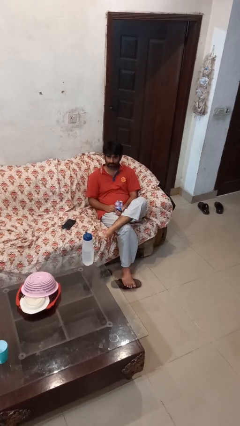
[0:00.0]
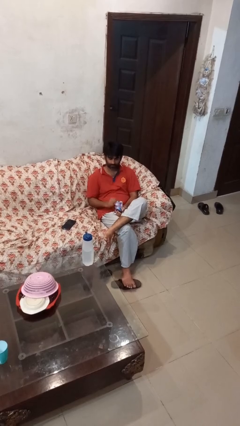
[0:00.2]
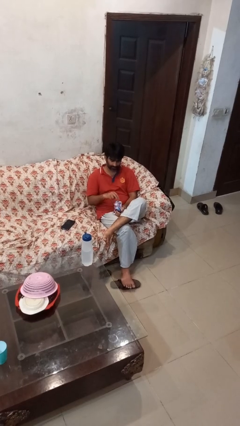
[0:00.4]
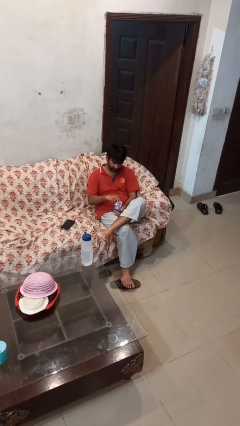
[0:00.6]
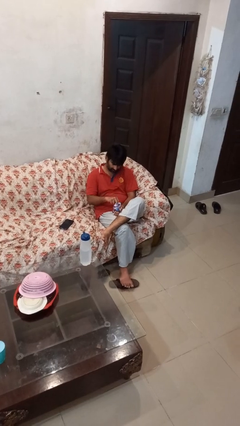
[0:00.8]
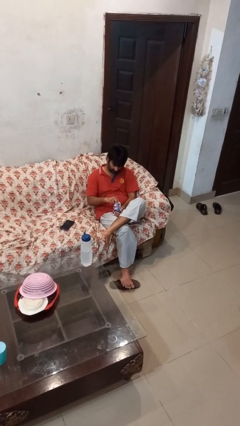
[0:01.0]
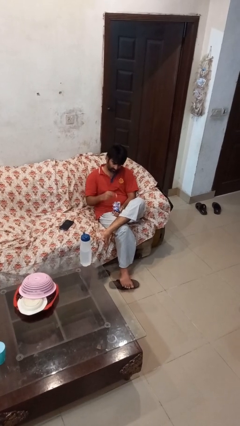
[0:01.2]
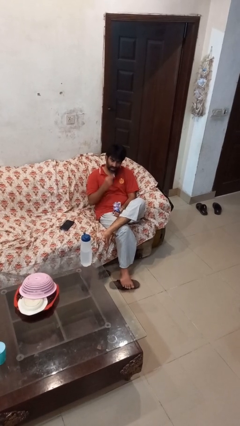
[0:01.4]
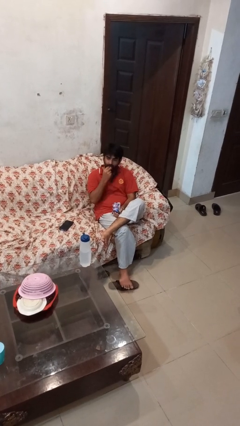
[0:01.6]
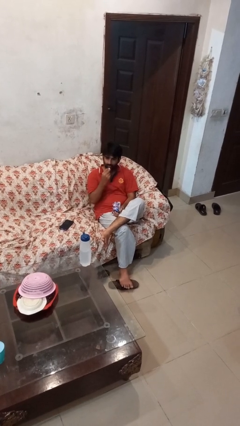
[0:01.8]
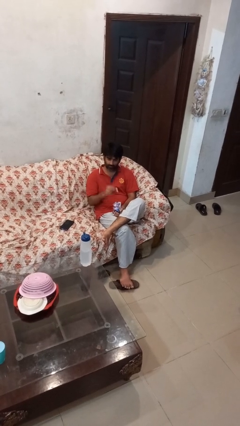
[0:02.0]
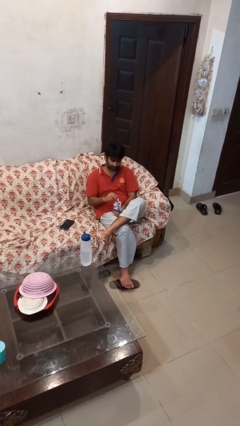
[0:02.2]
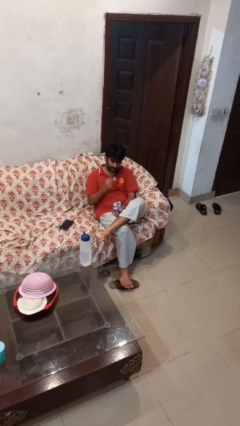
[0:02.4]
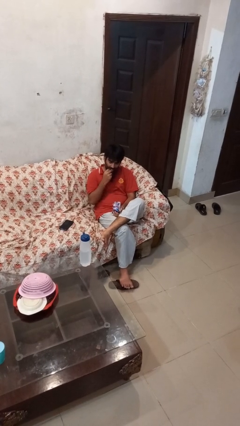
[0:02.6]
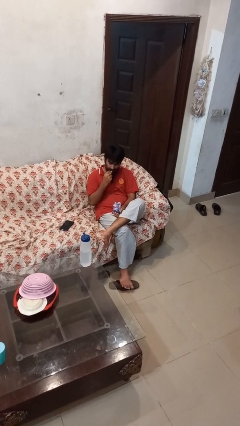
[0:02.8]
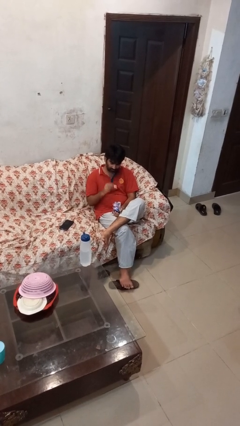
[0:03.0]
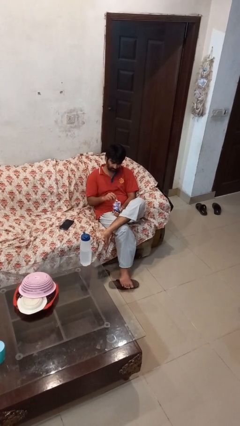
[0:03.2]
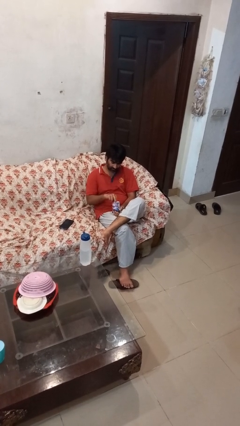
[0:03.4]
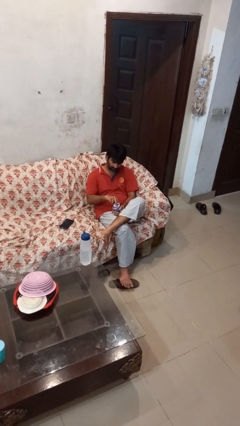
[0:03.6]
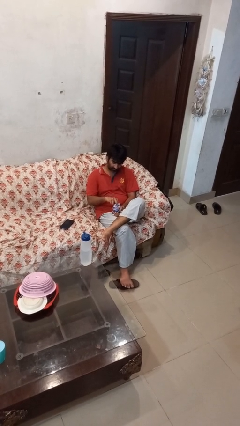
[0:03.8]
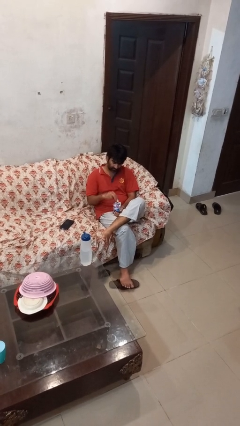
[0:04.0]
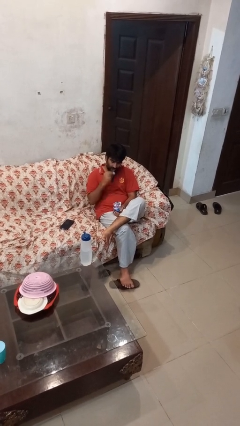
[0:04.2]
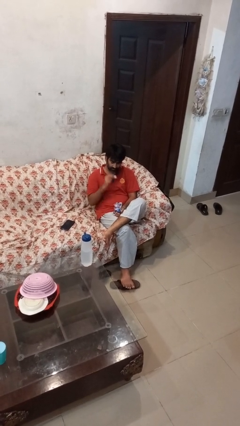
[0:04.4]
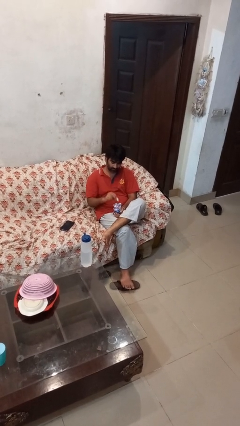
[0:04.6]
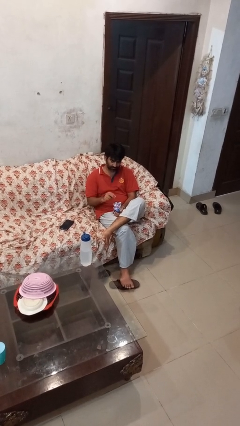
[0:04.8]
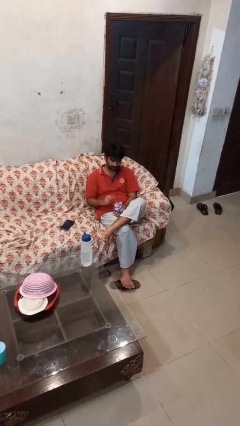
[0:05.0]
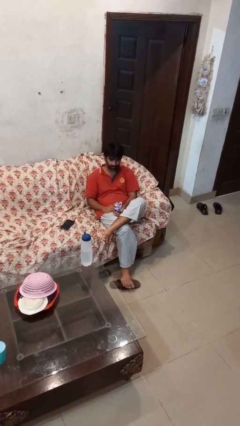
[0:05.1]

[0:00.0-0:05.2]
person eats snack from bag

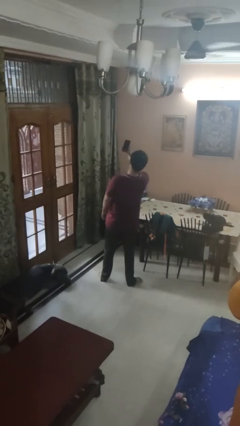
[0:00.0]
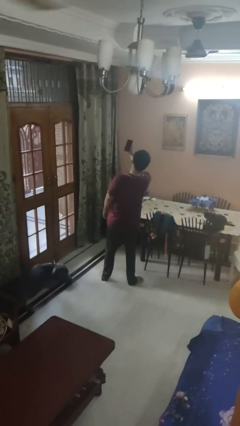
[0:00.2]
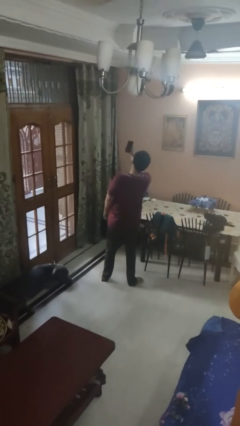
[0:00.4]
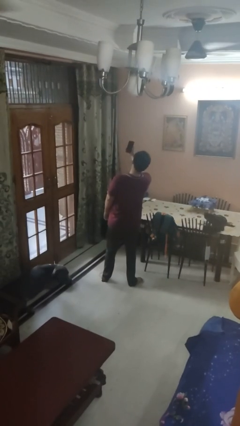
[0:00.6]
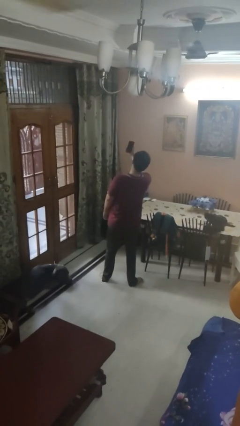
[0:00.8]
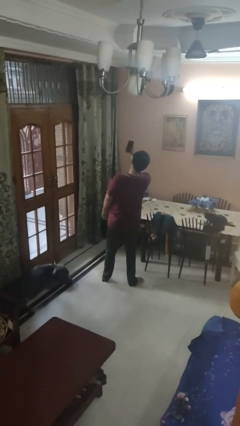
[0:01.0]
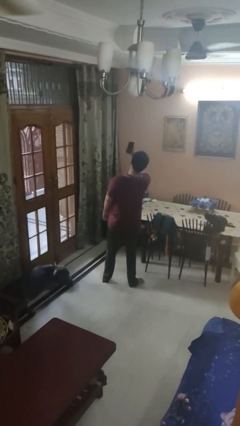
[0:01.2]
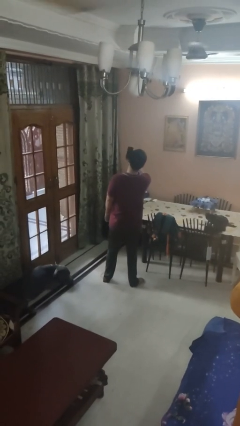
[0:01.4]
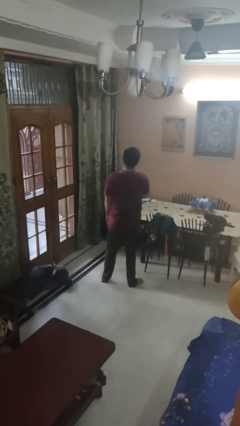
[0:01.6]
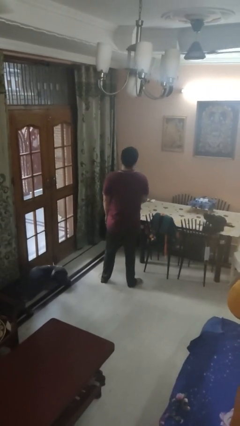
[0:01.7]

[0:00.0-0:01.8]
person takes selfie

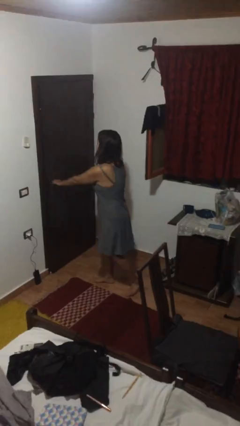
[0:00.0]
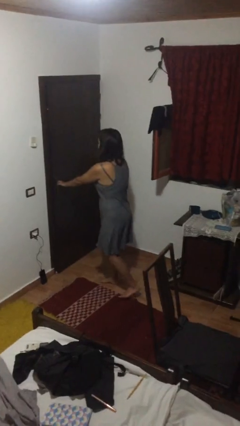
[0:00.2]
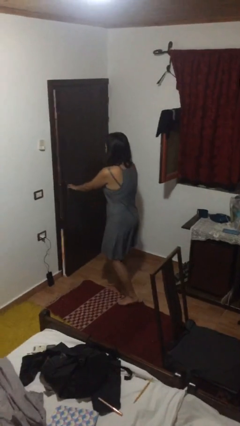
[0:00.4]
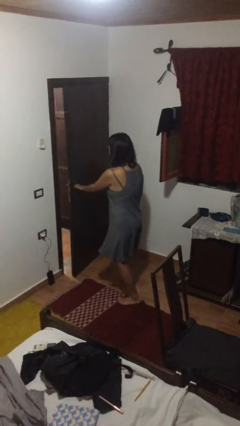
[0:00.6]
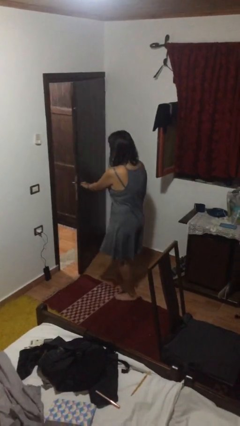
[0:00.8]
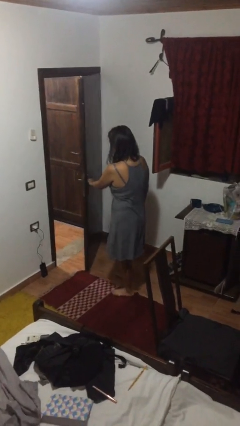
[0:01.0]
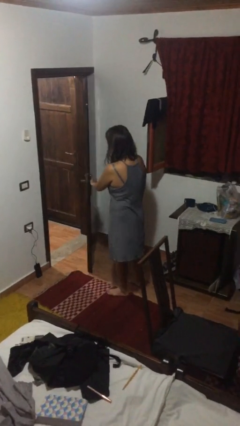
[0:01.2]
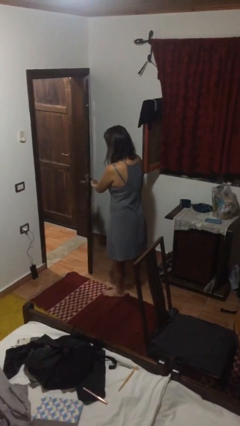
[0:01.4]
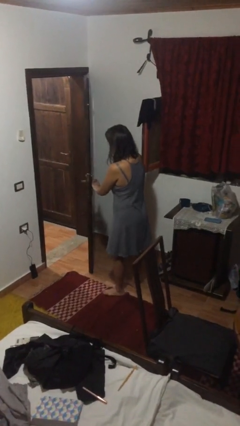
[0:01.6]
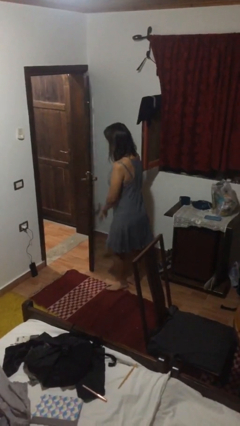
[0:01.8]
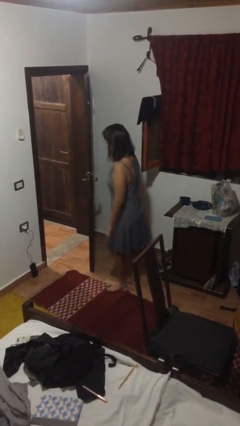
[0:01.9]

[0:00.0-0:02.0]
person opens facility door

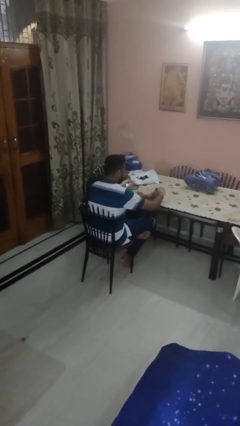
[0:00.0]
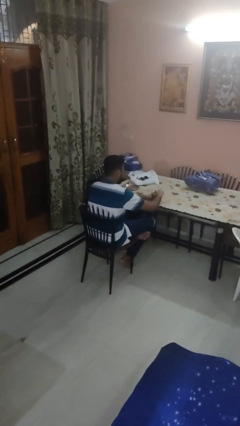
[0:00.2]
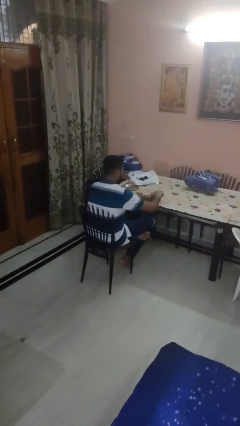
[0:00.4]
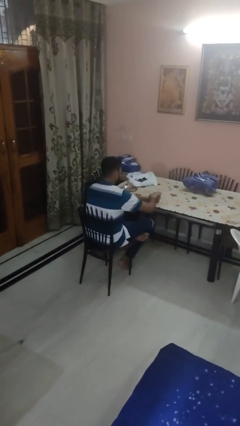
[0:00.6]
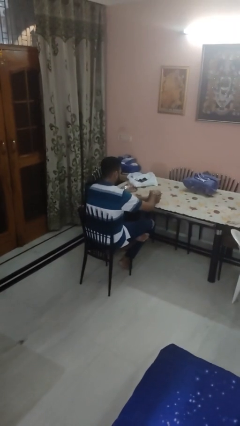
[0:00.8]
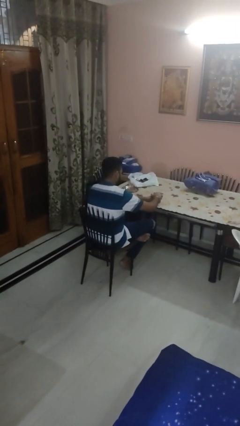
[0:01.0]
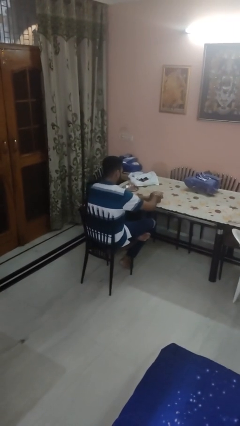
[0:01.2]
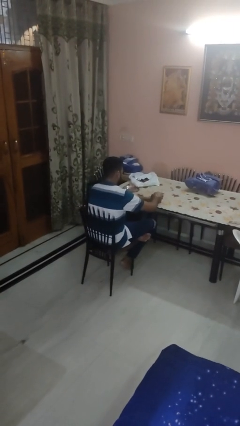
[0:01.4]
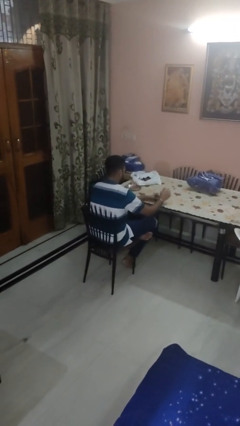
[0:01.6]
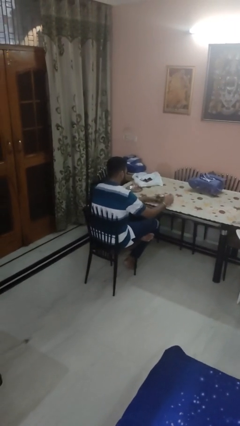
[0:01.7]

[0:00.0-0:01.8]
person closes jar

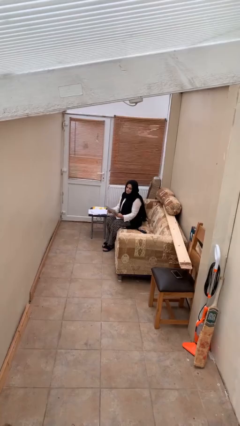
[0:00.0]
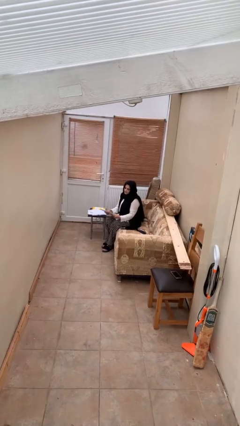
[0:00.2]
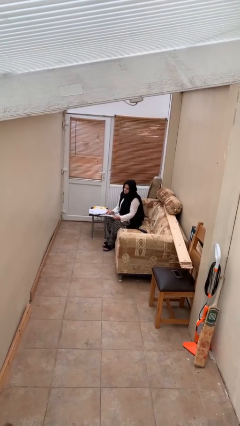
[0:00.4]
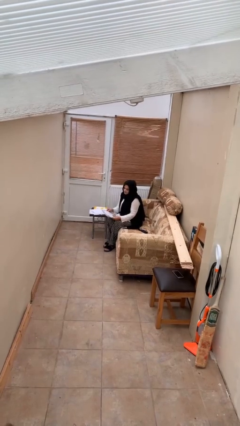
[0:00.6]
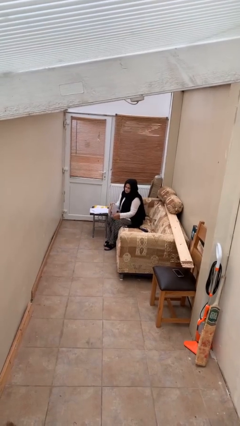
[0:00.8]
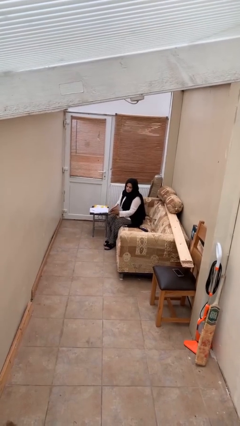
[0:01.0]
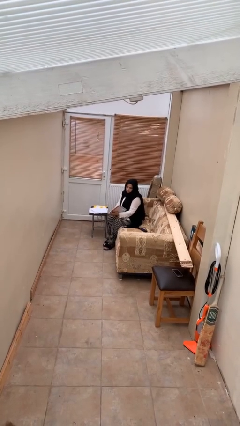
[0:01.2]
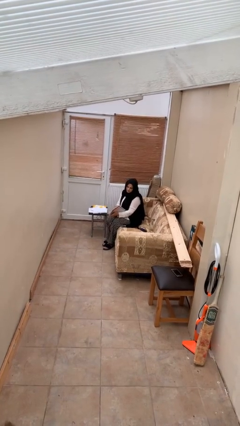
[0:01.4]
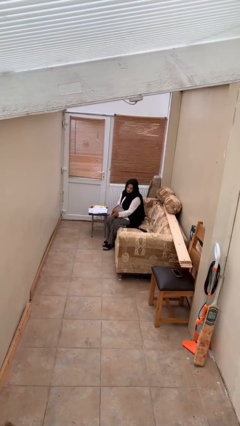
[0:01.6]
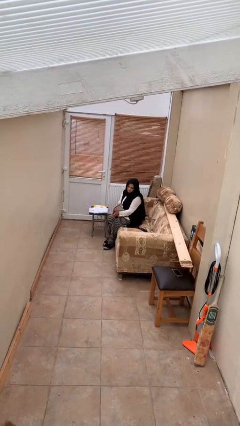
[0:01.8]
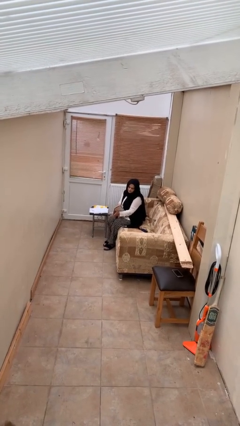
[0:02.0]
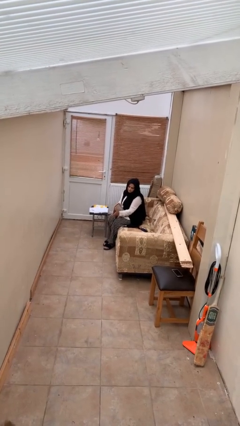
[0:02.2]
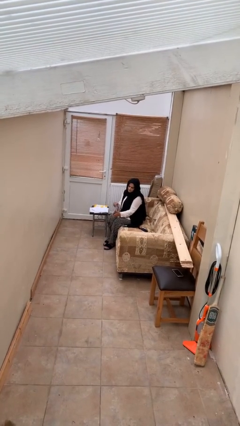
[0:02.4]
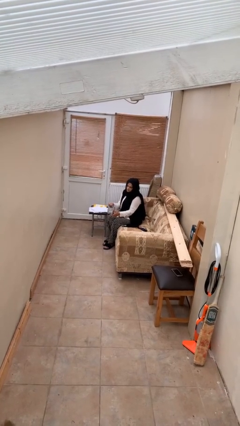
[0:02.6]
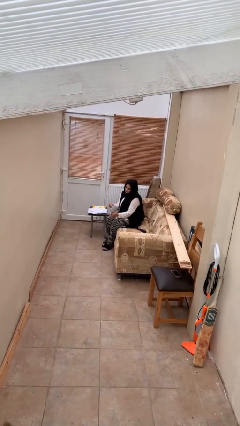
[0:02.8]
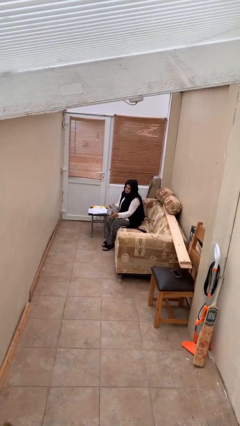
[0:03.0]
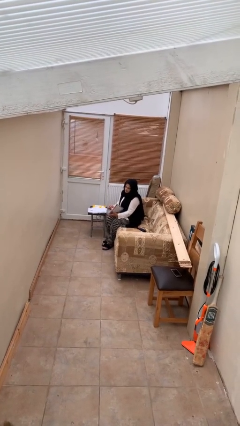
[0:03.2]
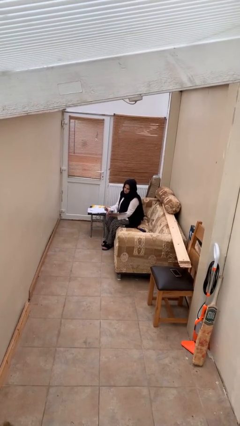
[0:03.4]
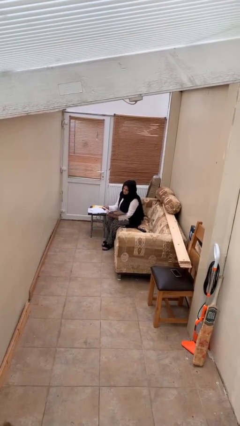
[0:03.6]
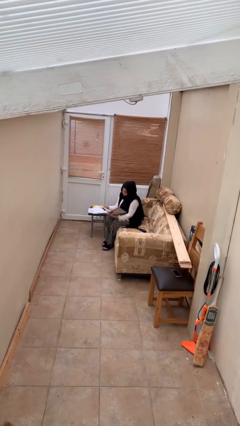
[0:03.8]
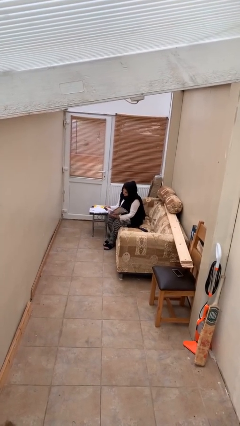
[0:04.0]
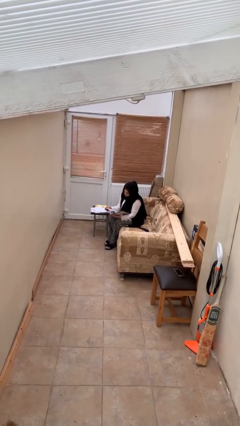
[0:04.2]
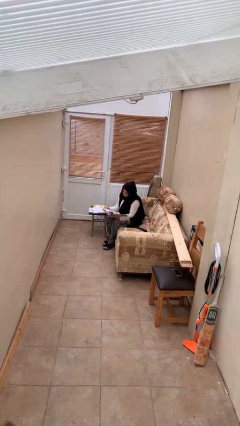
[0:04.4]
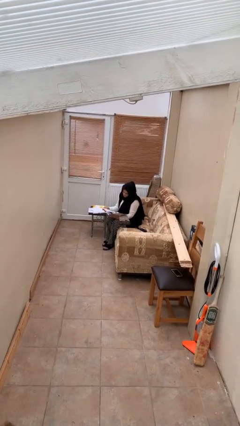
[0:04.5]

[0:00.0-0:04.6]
person reads document

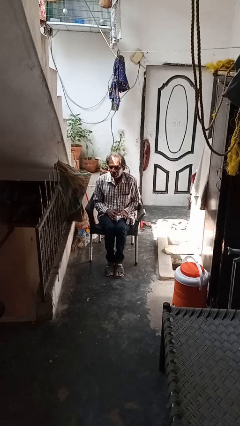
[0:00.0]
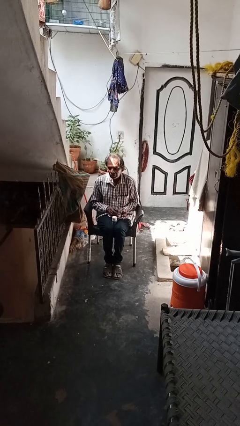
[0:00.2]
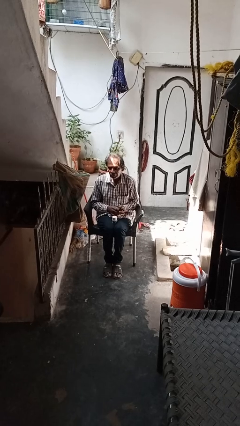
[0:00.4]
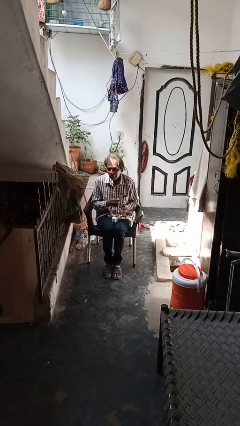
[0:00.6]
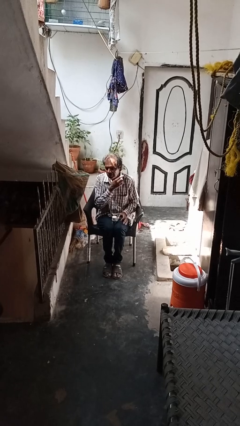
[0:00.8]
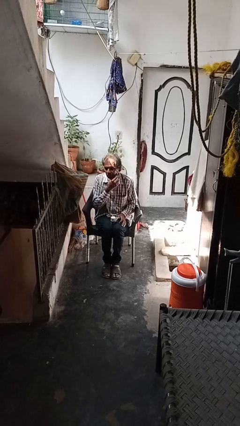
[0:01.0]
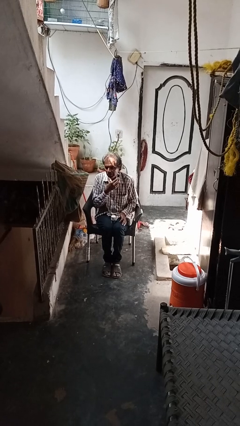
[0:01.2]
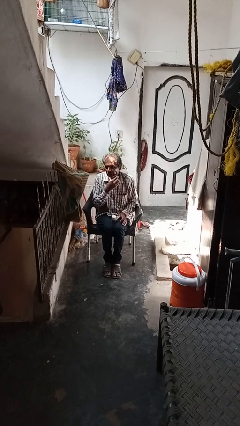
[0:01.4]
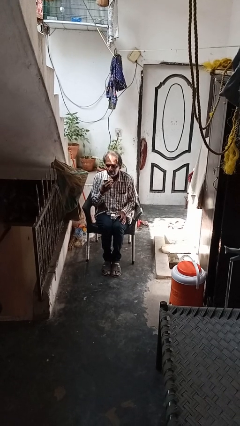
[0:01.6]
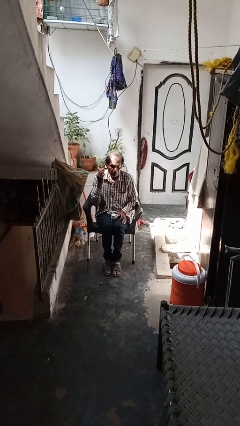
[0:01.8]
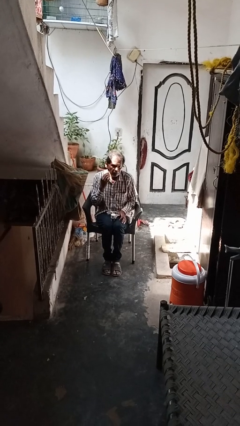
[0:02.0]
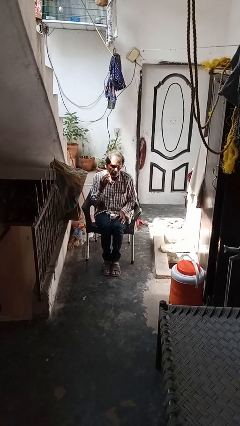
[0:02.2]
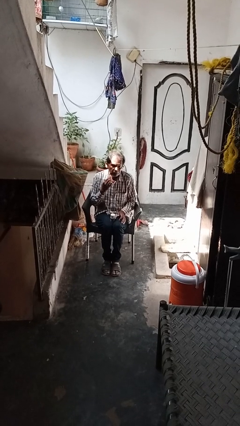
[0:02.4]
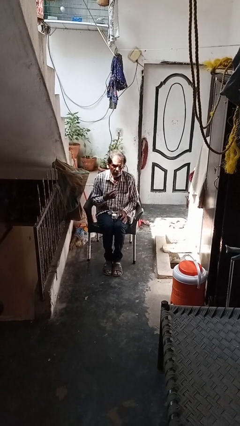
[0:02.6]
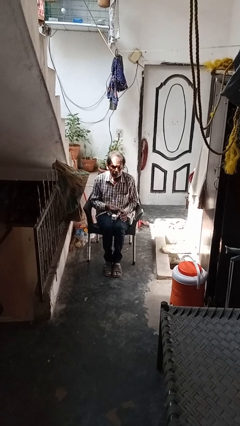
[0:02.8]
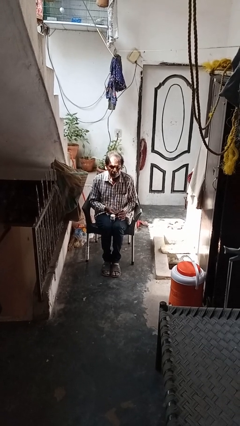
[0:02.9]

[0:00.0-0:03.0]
person shaves face
